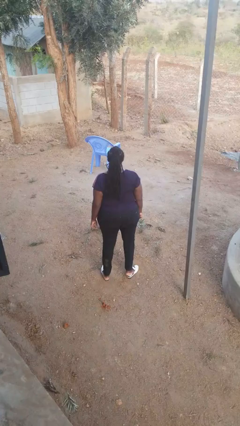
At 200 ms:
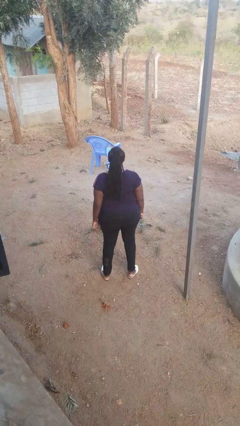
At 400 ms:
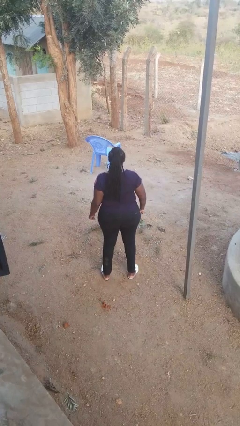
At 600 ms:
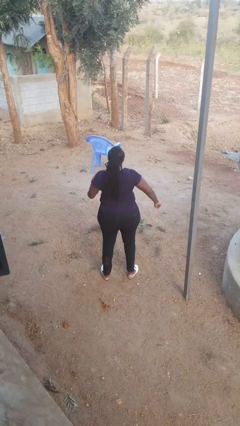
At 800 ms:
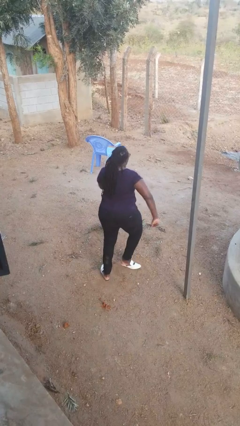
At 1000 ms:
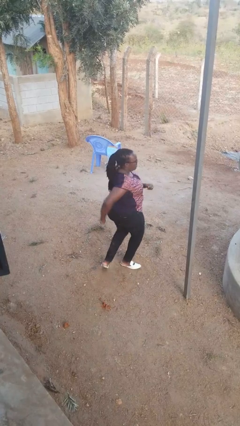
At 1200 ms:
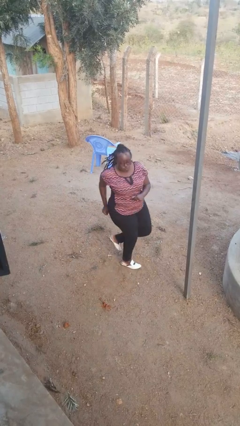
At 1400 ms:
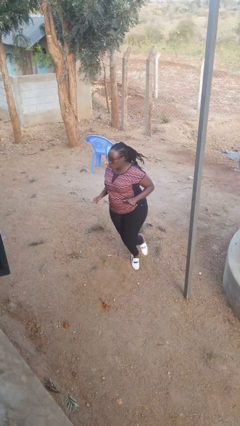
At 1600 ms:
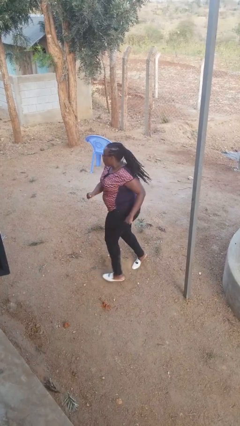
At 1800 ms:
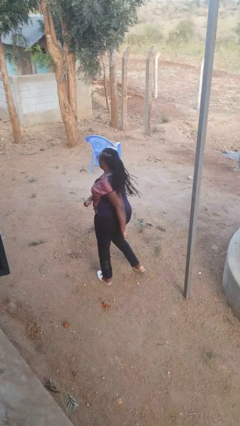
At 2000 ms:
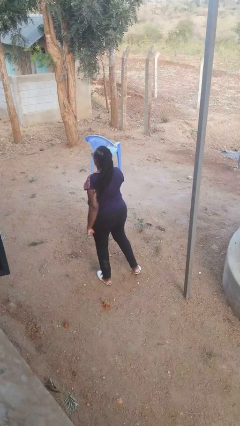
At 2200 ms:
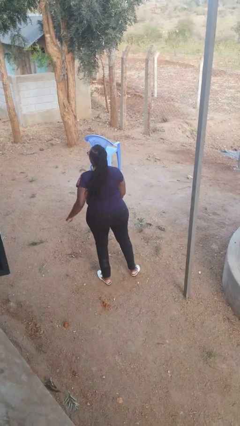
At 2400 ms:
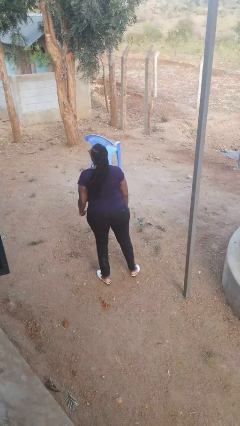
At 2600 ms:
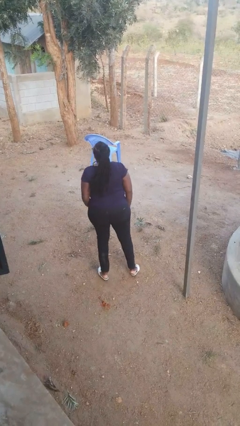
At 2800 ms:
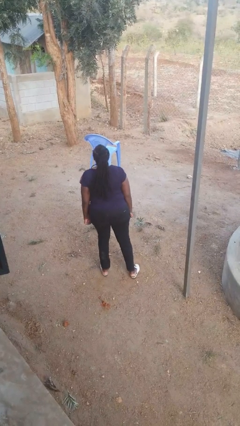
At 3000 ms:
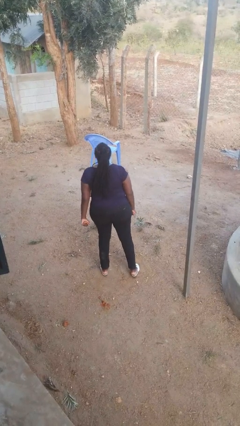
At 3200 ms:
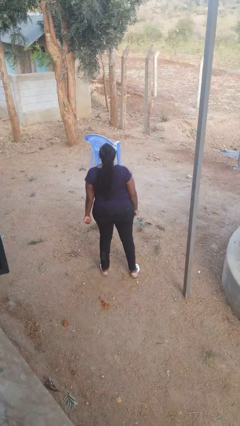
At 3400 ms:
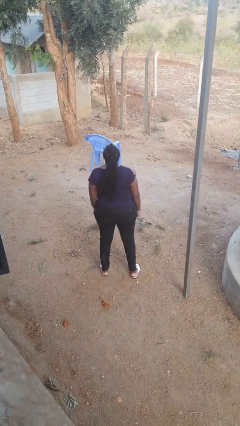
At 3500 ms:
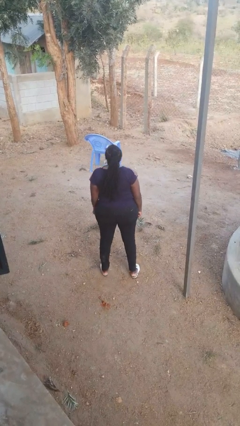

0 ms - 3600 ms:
person twirls

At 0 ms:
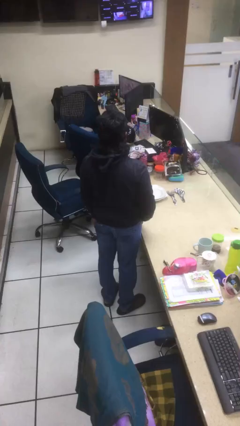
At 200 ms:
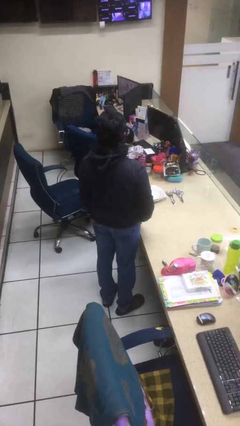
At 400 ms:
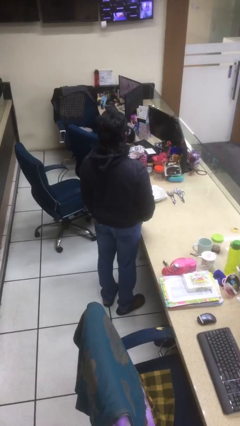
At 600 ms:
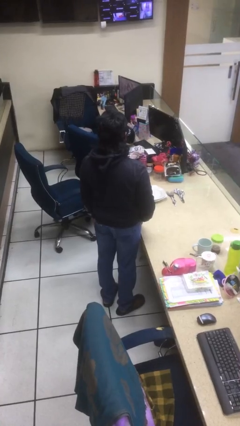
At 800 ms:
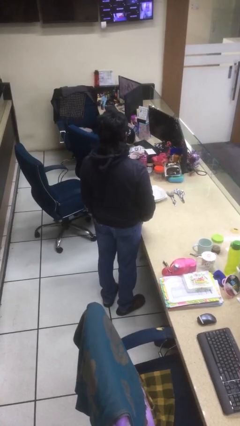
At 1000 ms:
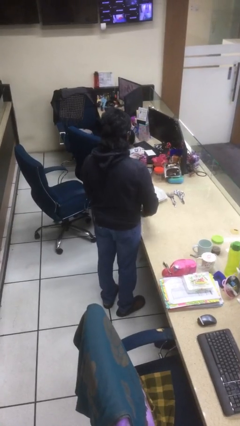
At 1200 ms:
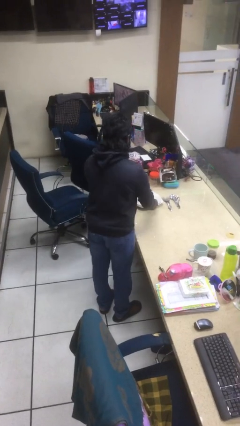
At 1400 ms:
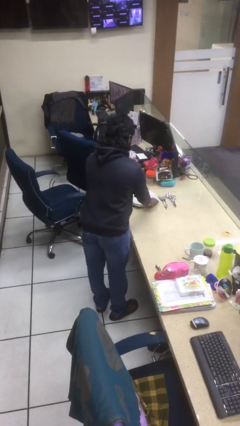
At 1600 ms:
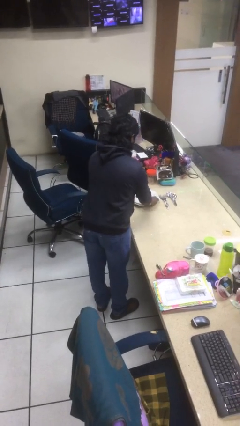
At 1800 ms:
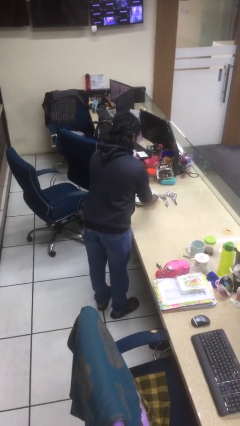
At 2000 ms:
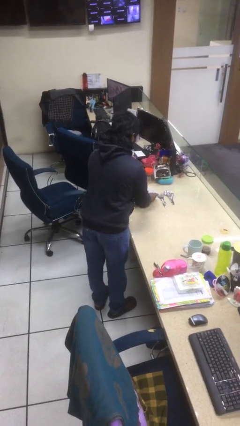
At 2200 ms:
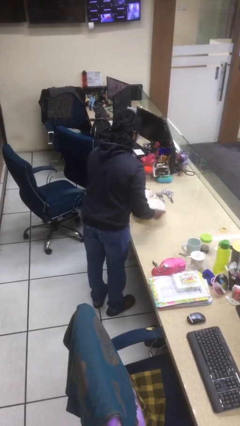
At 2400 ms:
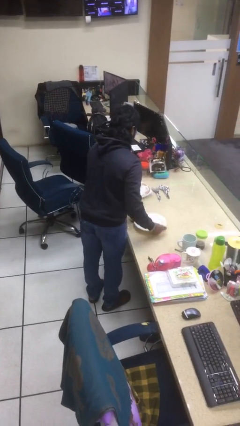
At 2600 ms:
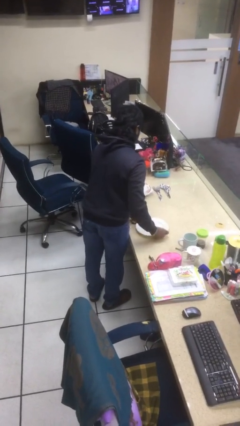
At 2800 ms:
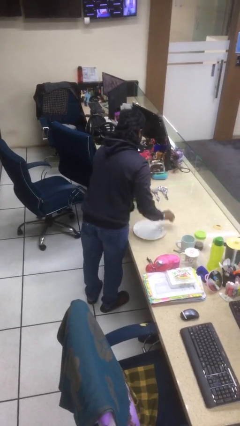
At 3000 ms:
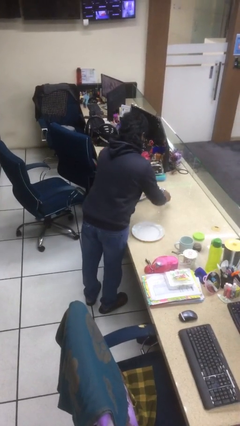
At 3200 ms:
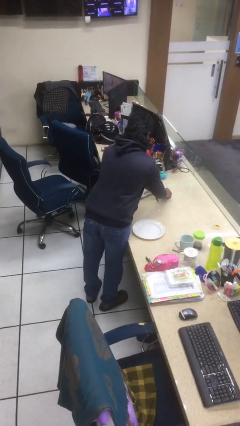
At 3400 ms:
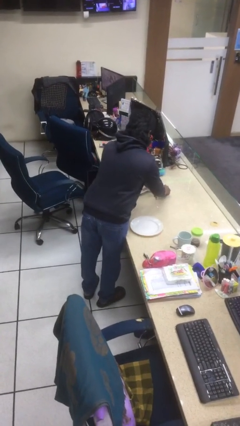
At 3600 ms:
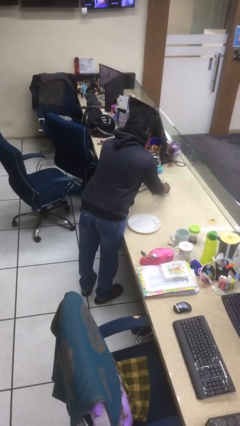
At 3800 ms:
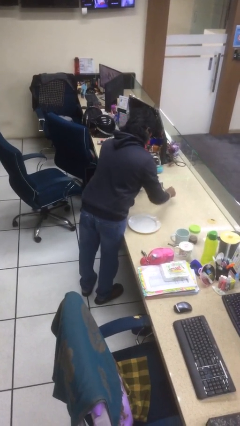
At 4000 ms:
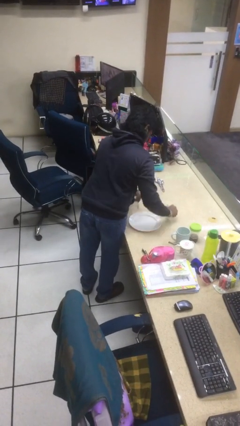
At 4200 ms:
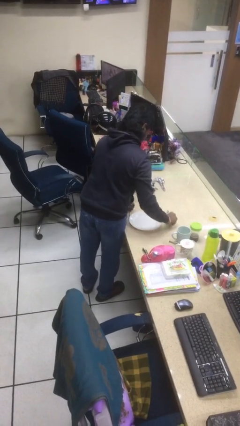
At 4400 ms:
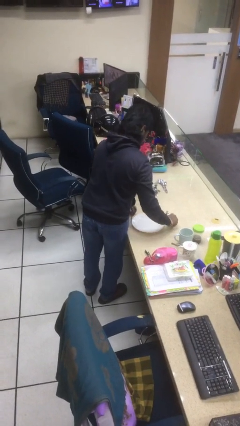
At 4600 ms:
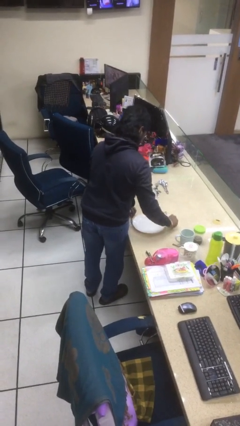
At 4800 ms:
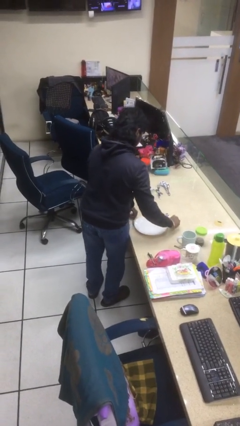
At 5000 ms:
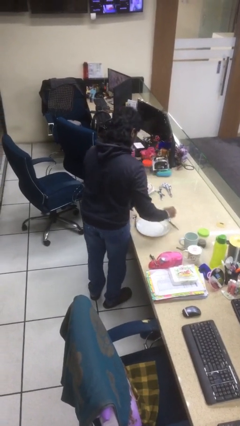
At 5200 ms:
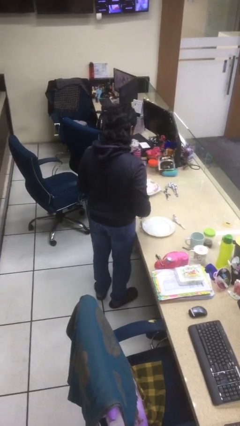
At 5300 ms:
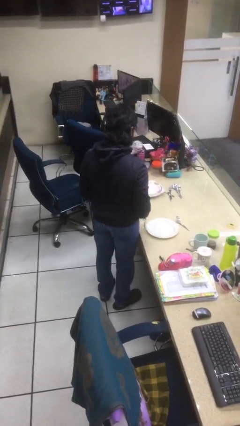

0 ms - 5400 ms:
person sets table

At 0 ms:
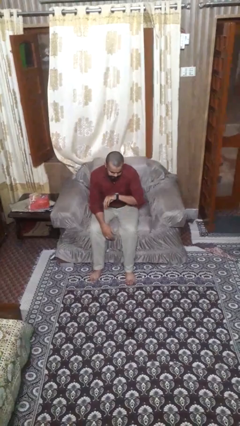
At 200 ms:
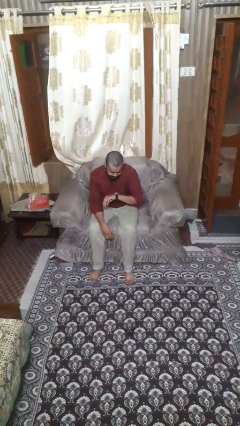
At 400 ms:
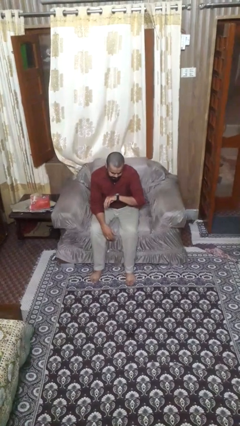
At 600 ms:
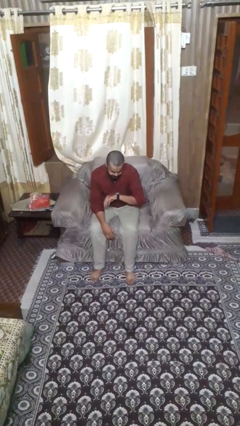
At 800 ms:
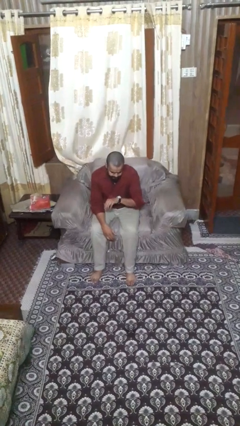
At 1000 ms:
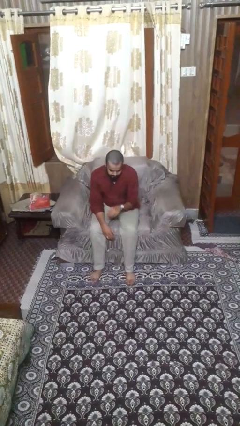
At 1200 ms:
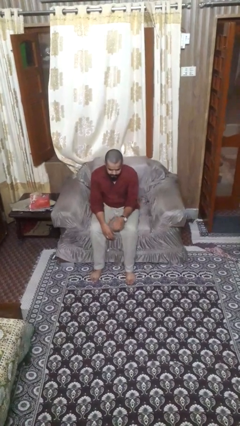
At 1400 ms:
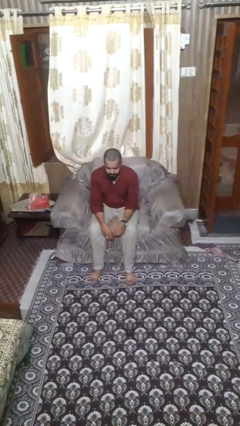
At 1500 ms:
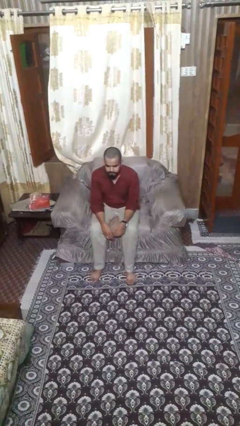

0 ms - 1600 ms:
person looks at wristwatch

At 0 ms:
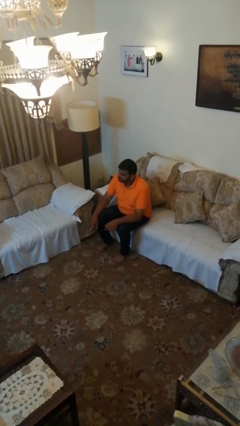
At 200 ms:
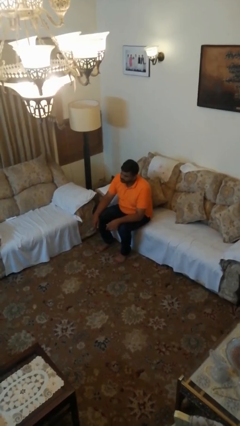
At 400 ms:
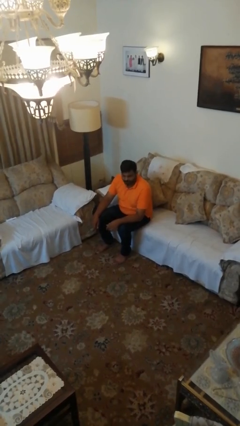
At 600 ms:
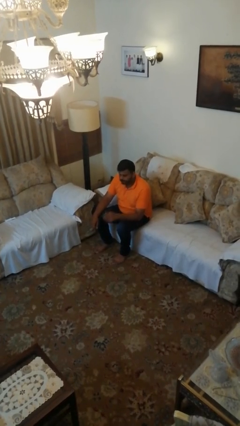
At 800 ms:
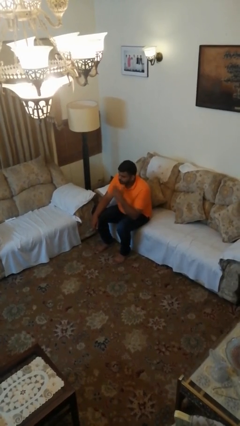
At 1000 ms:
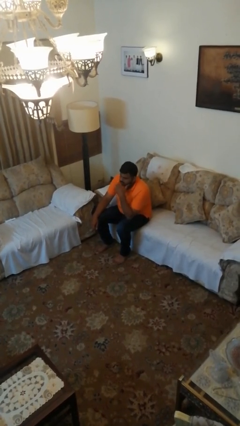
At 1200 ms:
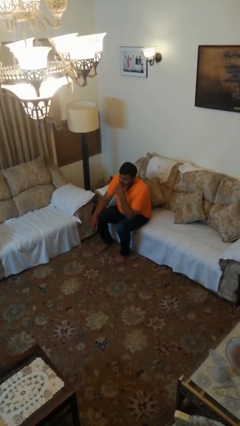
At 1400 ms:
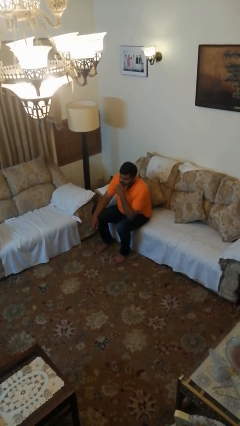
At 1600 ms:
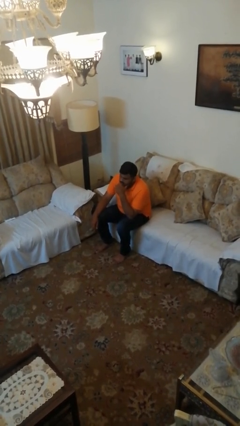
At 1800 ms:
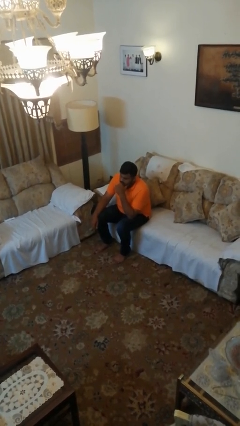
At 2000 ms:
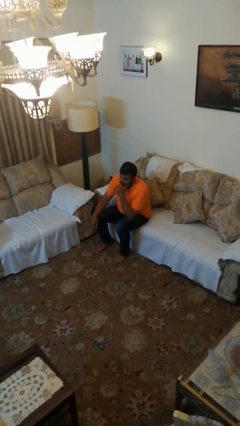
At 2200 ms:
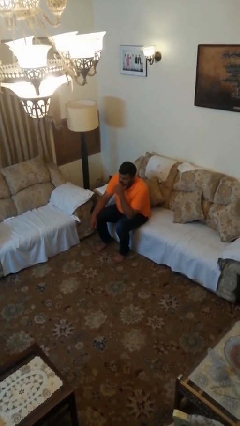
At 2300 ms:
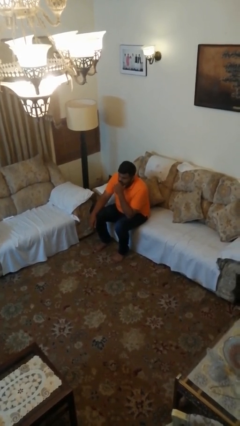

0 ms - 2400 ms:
person strokes chin

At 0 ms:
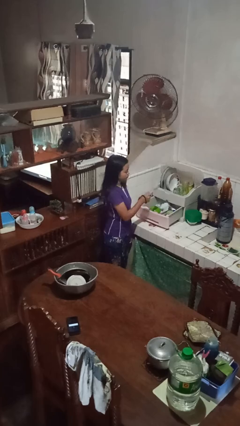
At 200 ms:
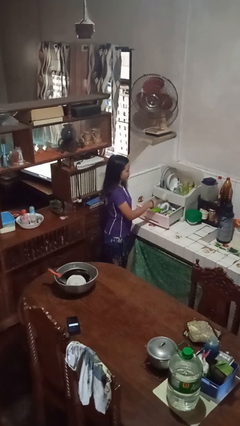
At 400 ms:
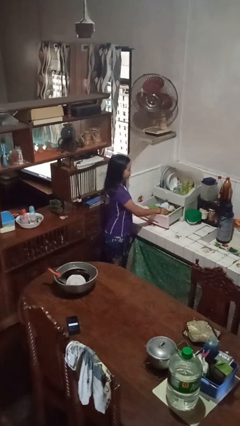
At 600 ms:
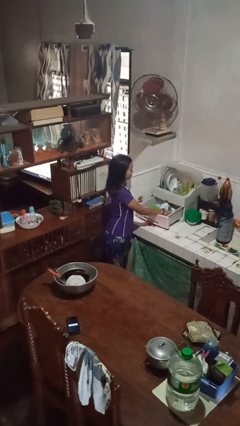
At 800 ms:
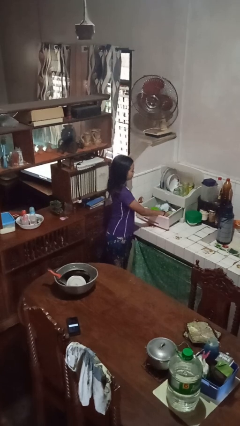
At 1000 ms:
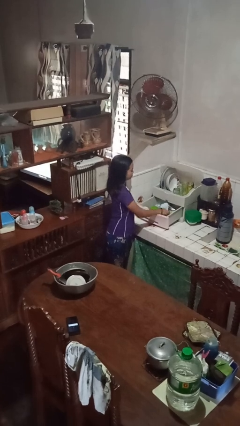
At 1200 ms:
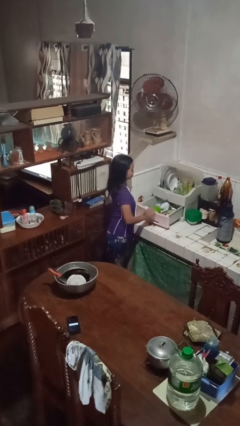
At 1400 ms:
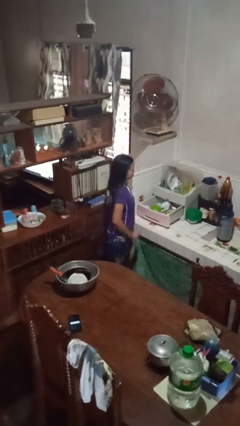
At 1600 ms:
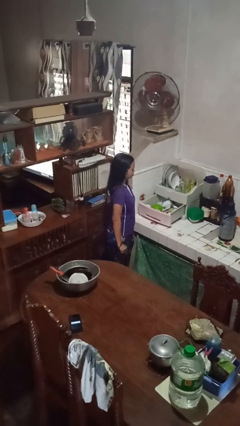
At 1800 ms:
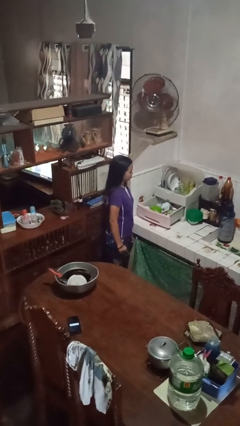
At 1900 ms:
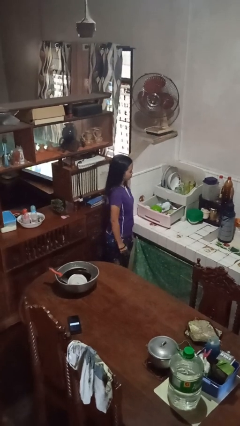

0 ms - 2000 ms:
person puts object into kitchen drawer

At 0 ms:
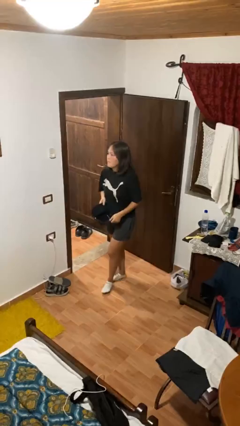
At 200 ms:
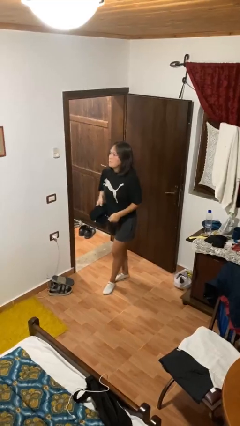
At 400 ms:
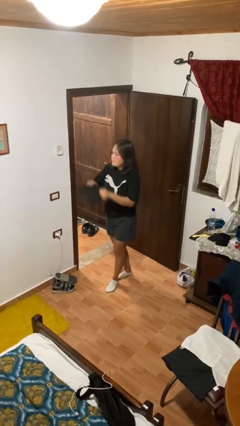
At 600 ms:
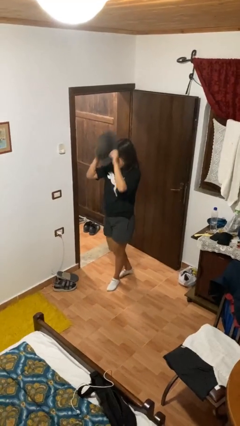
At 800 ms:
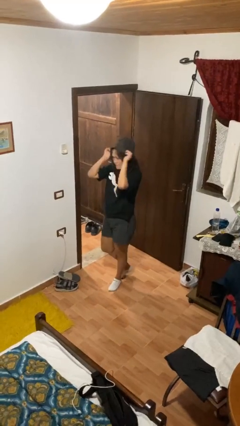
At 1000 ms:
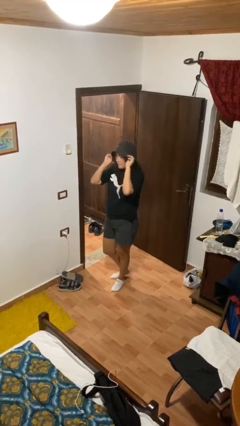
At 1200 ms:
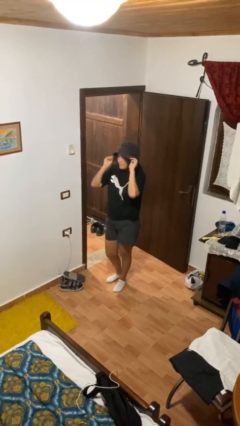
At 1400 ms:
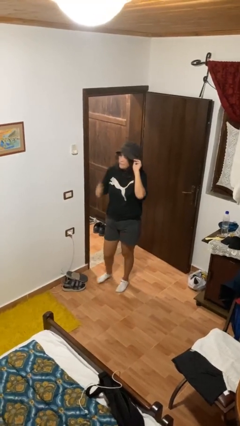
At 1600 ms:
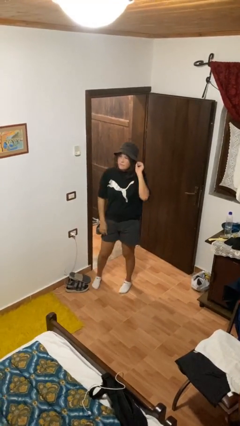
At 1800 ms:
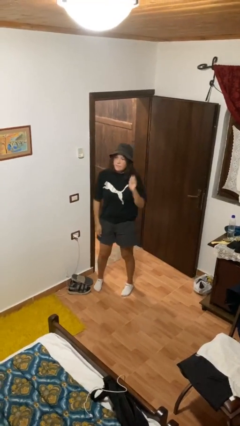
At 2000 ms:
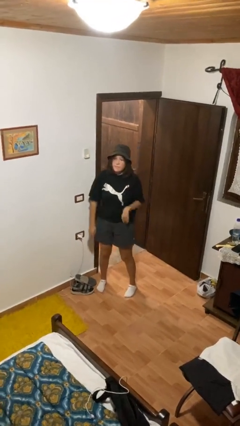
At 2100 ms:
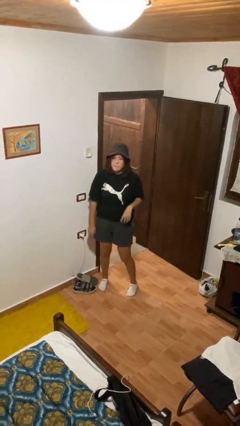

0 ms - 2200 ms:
person puts on hat
